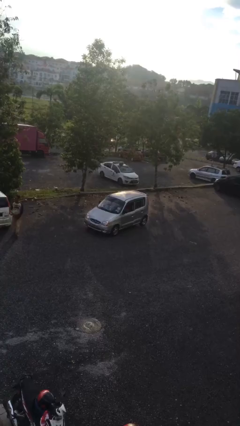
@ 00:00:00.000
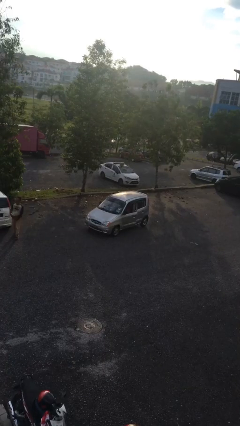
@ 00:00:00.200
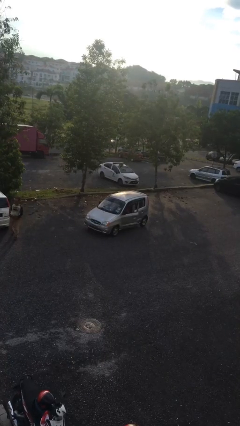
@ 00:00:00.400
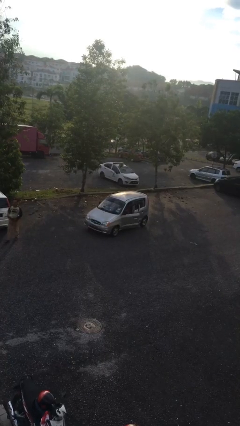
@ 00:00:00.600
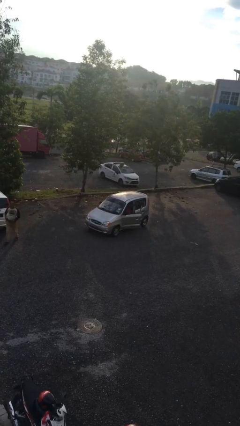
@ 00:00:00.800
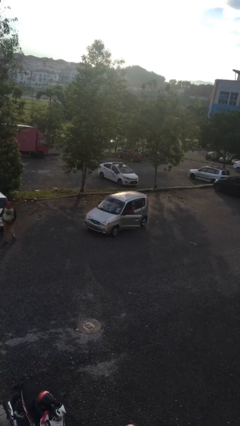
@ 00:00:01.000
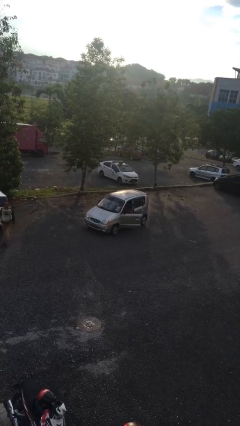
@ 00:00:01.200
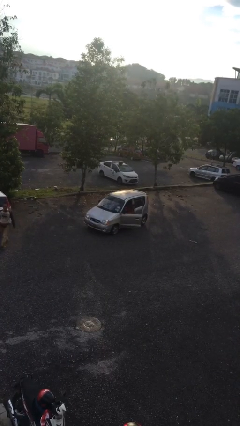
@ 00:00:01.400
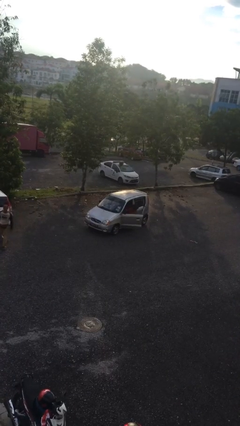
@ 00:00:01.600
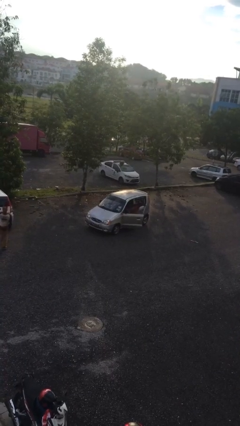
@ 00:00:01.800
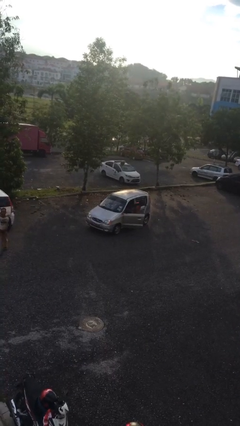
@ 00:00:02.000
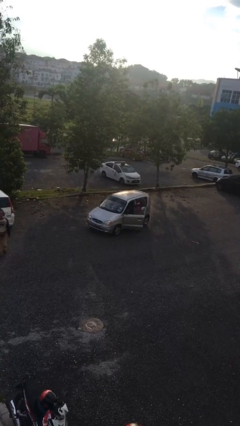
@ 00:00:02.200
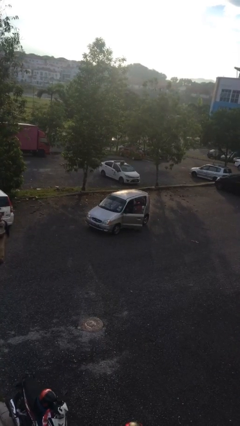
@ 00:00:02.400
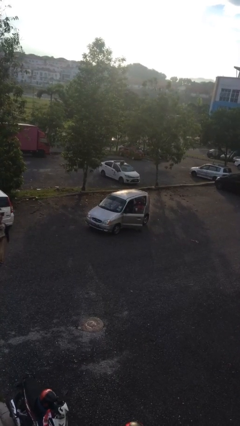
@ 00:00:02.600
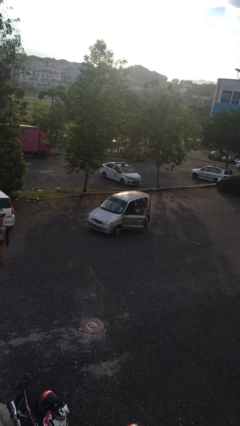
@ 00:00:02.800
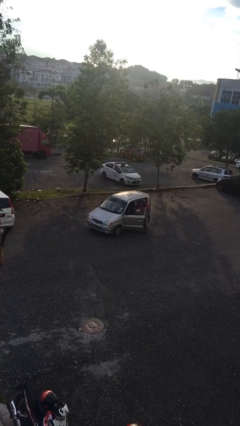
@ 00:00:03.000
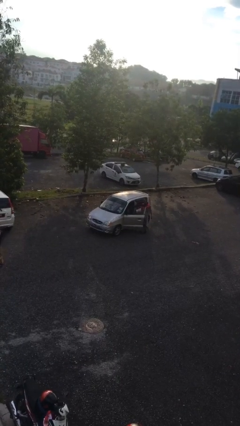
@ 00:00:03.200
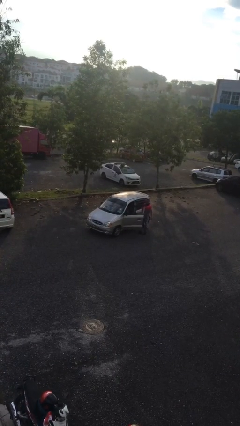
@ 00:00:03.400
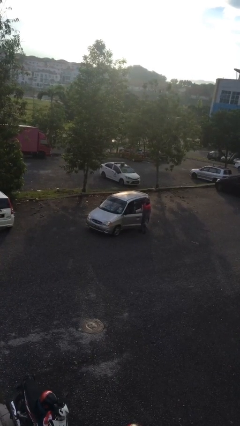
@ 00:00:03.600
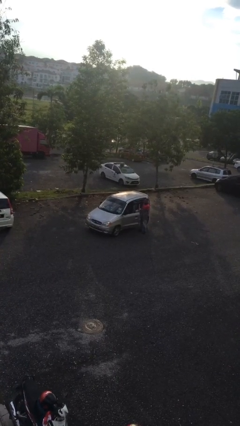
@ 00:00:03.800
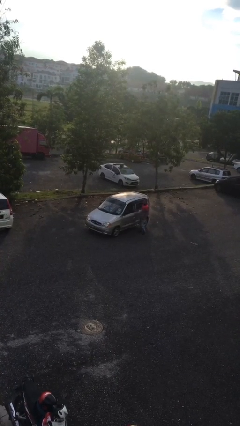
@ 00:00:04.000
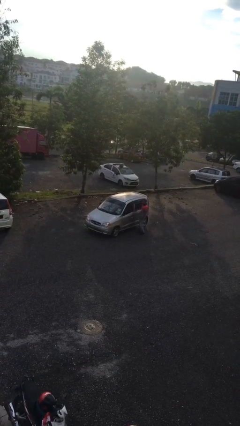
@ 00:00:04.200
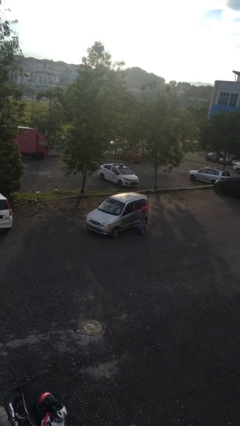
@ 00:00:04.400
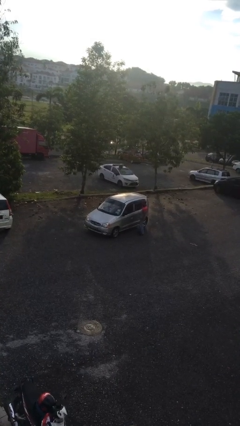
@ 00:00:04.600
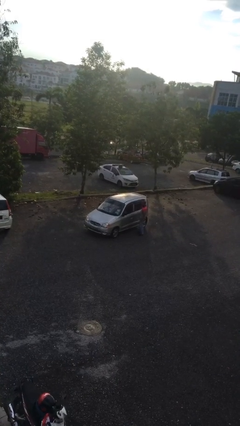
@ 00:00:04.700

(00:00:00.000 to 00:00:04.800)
car drops off person

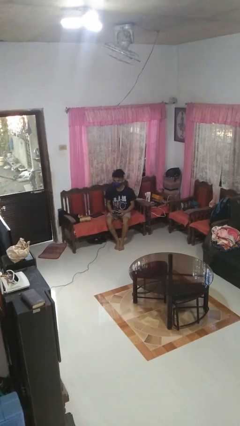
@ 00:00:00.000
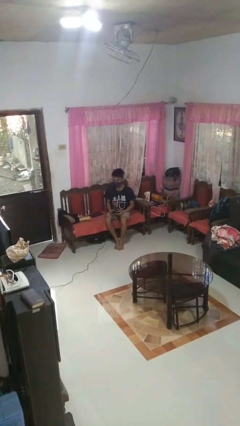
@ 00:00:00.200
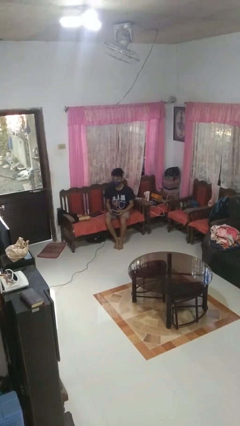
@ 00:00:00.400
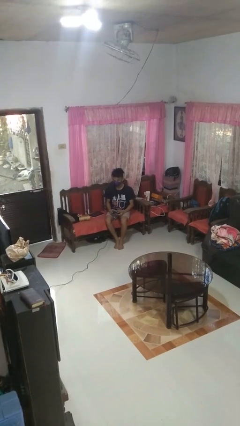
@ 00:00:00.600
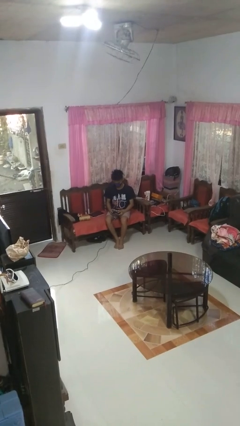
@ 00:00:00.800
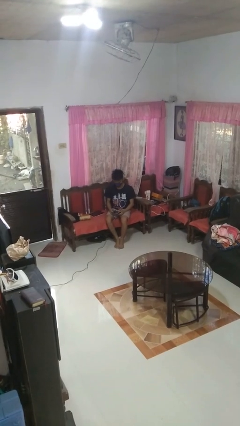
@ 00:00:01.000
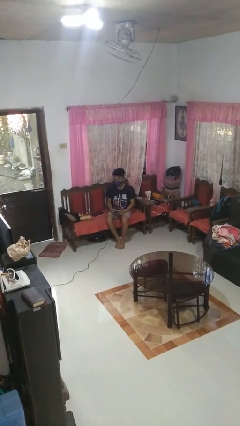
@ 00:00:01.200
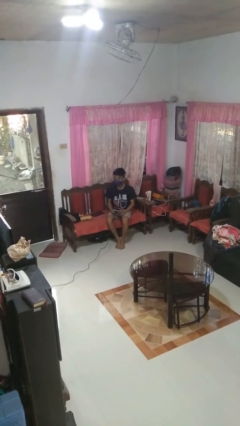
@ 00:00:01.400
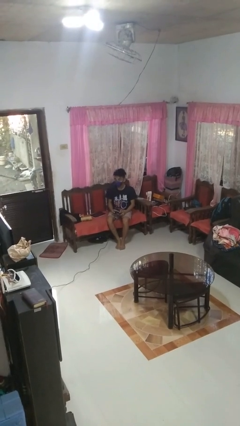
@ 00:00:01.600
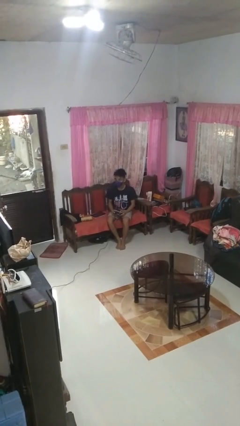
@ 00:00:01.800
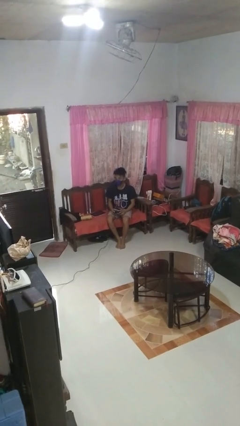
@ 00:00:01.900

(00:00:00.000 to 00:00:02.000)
person interacts with handheld game

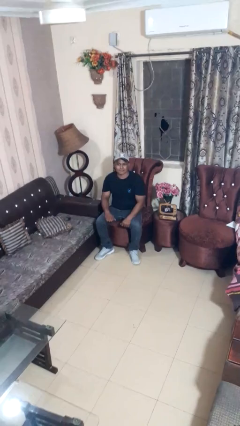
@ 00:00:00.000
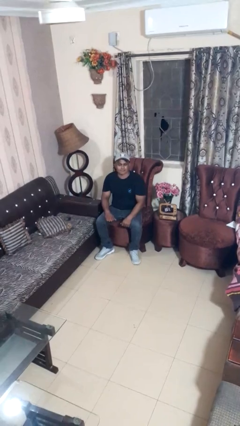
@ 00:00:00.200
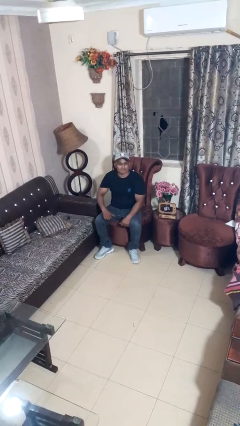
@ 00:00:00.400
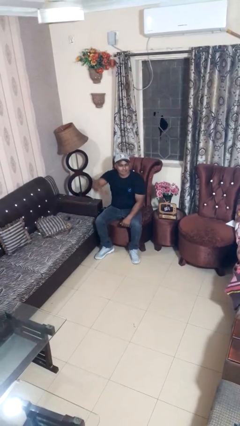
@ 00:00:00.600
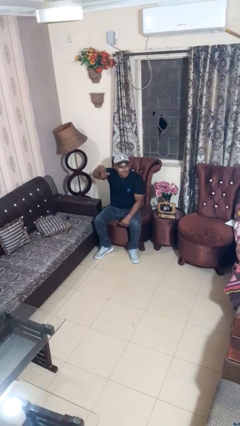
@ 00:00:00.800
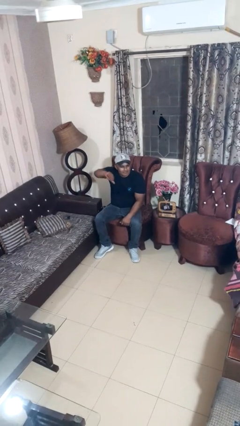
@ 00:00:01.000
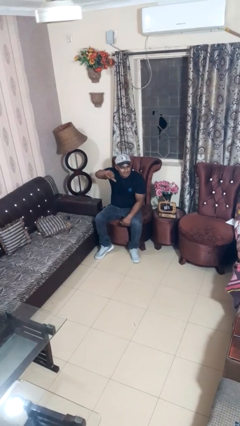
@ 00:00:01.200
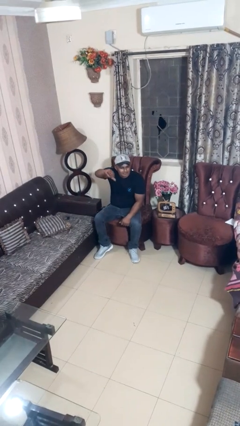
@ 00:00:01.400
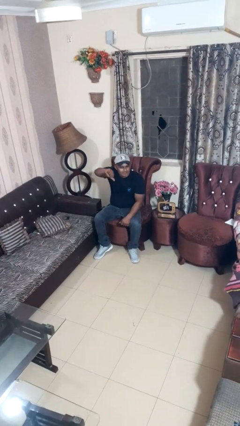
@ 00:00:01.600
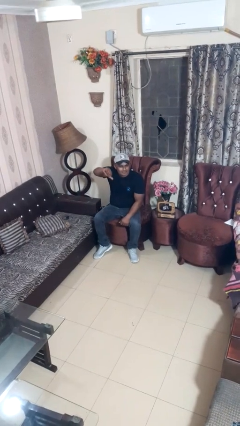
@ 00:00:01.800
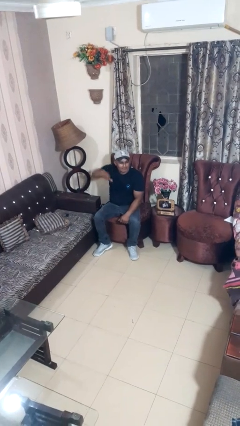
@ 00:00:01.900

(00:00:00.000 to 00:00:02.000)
person gestures thumbs down

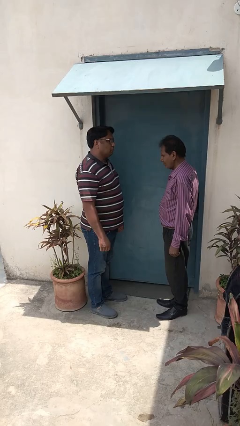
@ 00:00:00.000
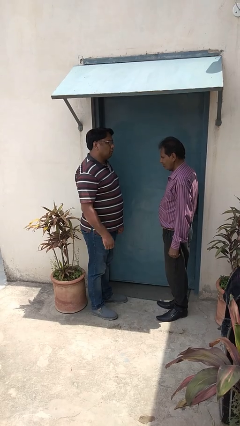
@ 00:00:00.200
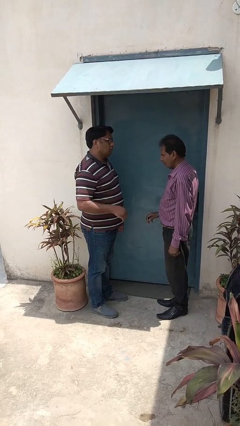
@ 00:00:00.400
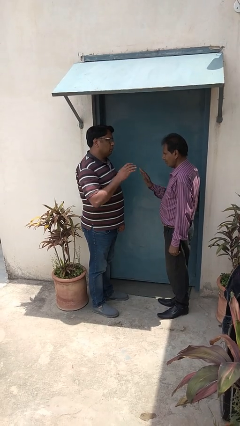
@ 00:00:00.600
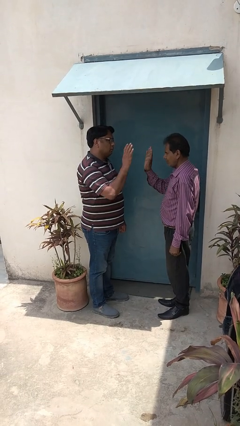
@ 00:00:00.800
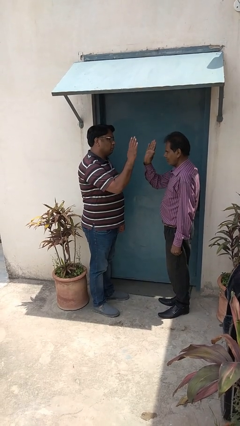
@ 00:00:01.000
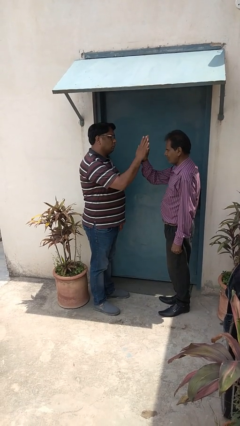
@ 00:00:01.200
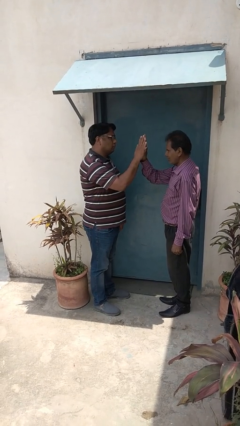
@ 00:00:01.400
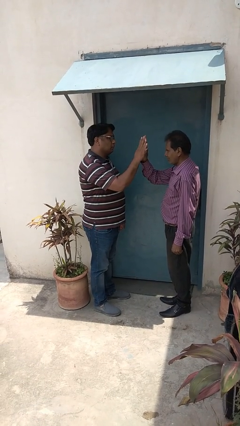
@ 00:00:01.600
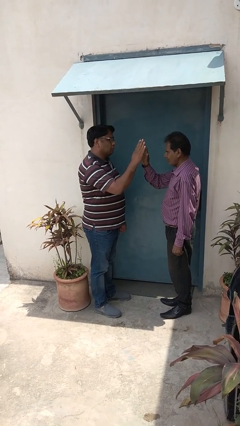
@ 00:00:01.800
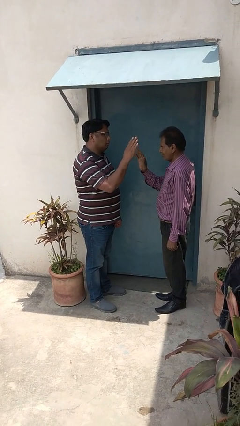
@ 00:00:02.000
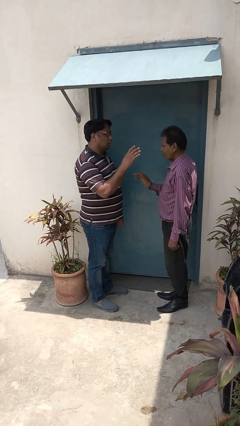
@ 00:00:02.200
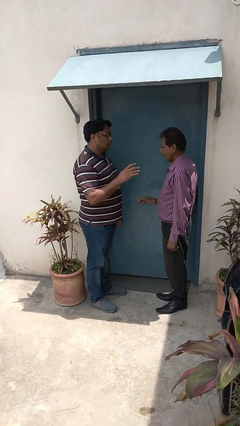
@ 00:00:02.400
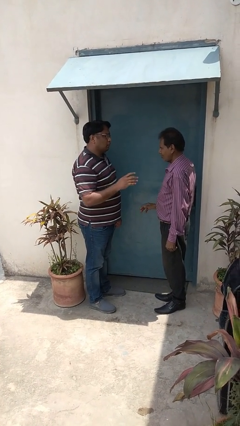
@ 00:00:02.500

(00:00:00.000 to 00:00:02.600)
person highfives hand

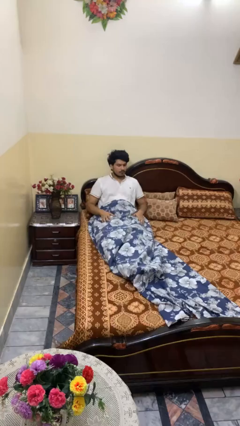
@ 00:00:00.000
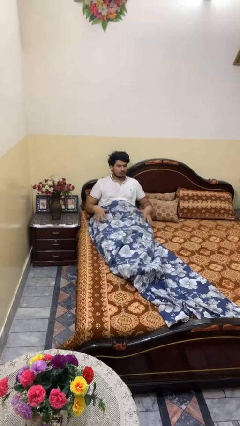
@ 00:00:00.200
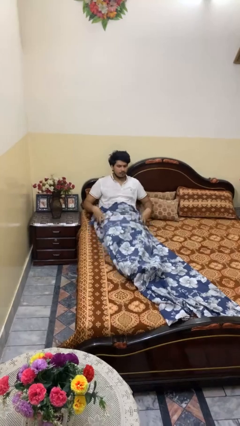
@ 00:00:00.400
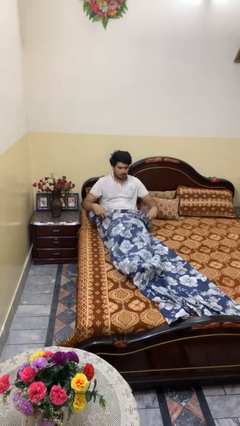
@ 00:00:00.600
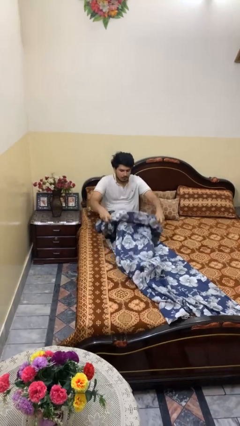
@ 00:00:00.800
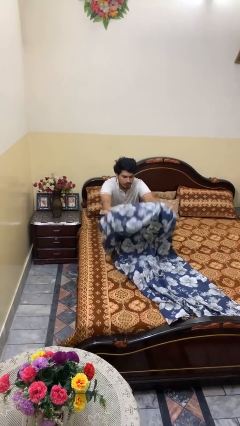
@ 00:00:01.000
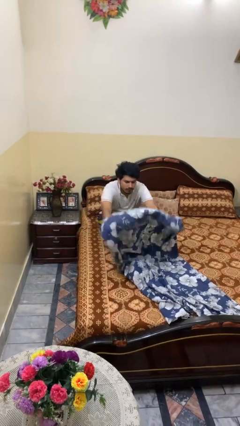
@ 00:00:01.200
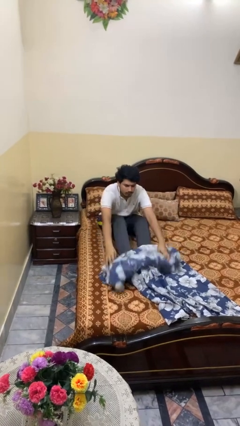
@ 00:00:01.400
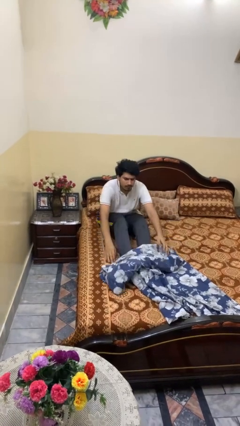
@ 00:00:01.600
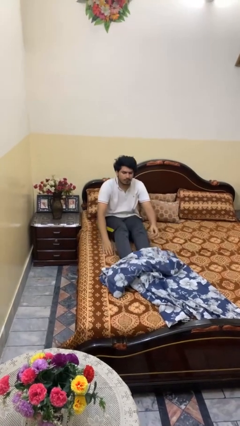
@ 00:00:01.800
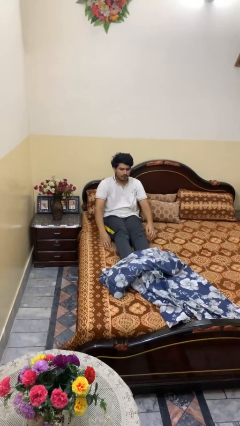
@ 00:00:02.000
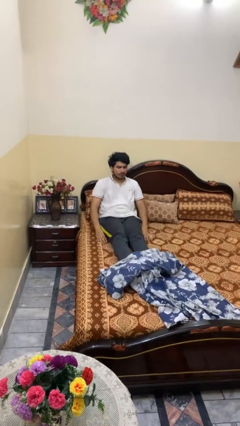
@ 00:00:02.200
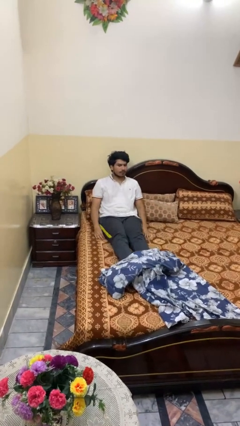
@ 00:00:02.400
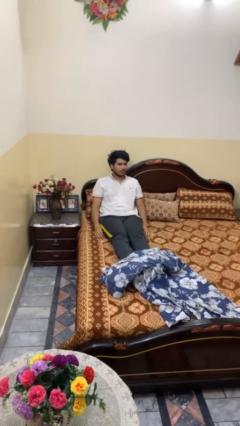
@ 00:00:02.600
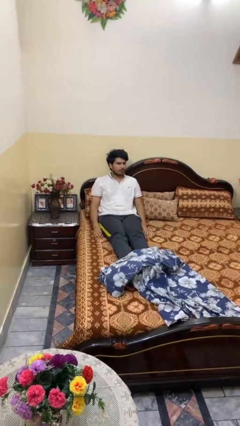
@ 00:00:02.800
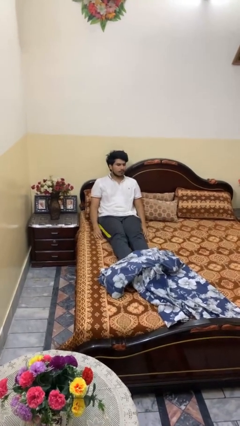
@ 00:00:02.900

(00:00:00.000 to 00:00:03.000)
person uncovers with bedsheets

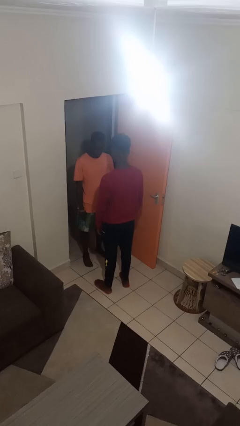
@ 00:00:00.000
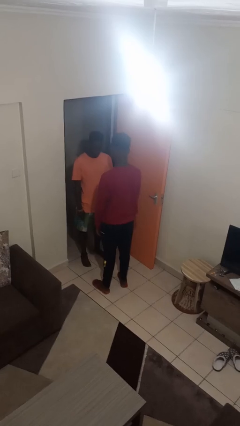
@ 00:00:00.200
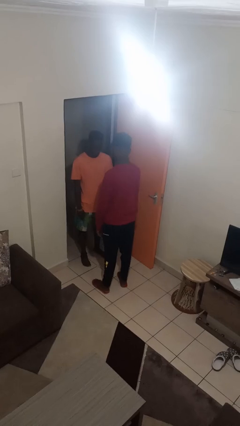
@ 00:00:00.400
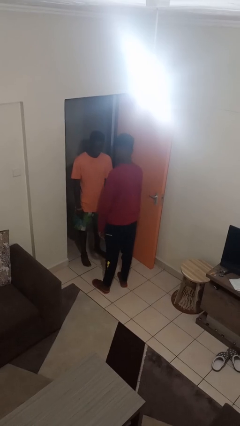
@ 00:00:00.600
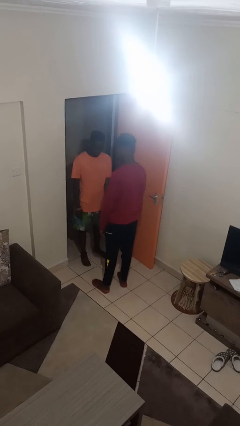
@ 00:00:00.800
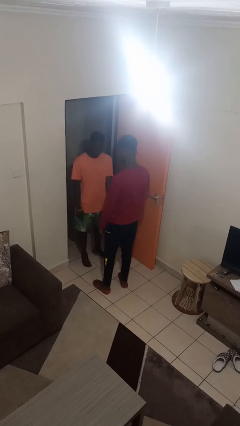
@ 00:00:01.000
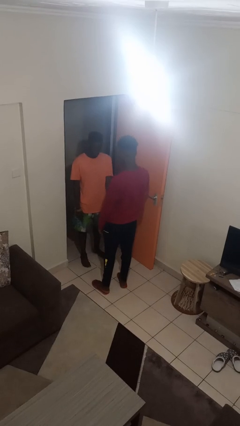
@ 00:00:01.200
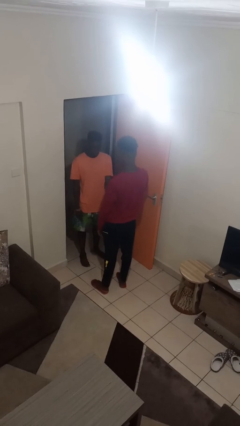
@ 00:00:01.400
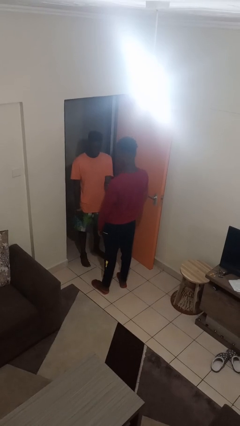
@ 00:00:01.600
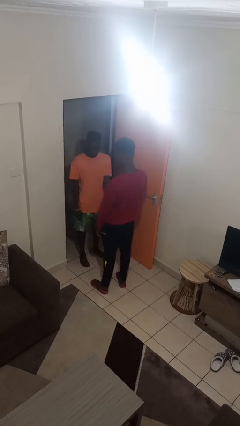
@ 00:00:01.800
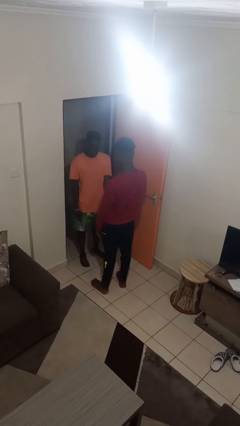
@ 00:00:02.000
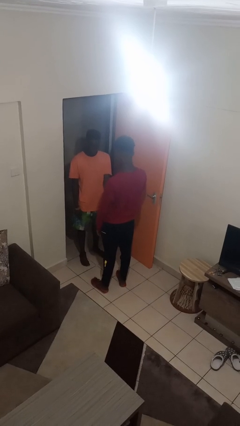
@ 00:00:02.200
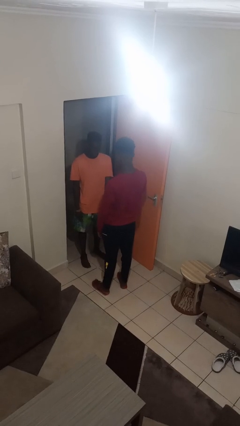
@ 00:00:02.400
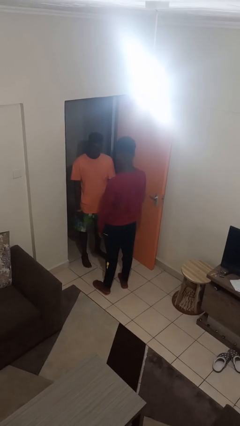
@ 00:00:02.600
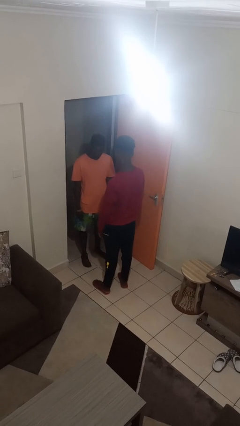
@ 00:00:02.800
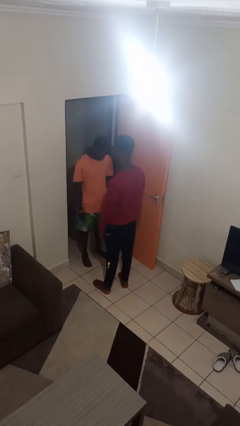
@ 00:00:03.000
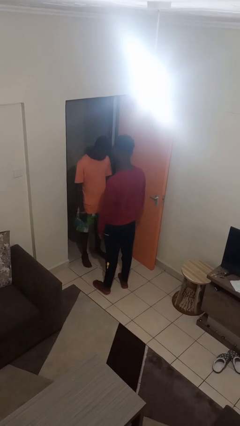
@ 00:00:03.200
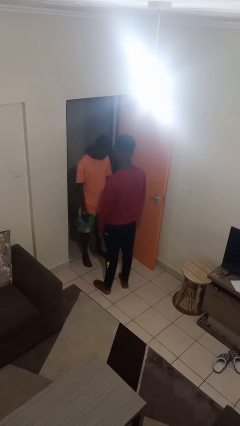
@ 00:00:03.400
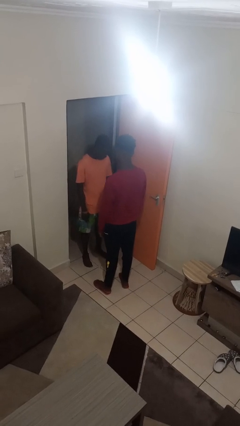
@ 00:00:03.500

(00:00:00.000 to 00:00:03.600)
person grabs person by forearm
